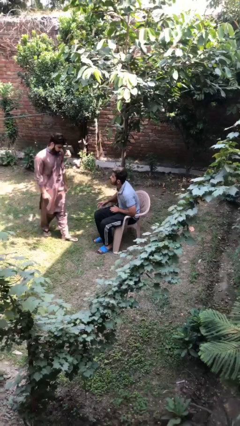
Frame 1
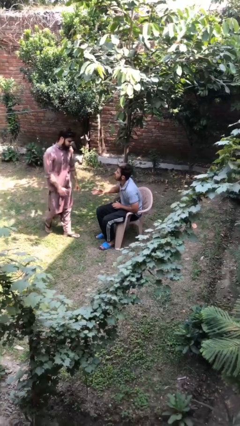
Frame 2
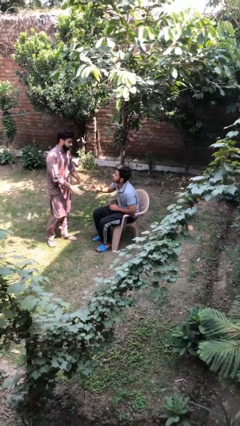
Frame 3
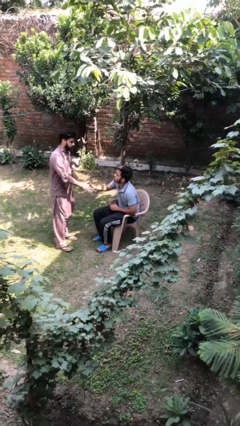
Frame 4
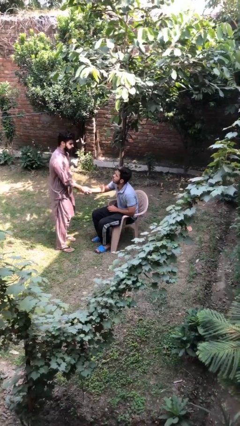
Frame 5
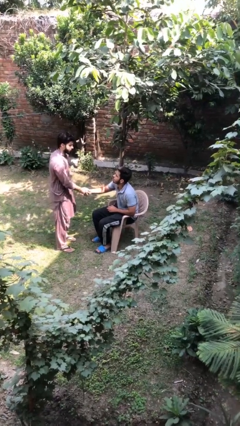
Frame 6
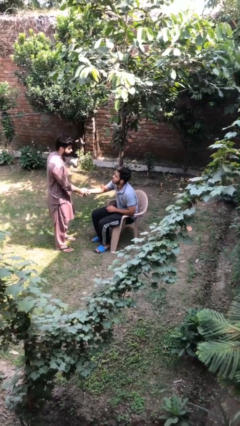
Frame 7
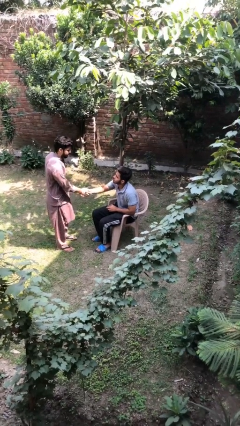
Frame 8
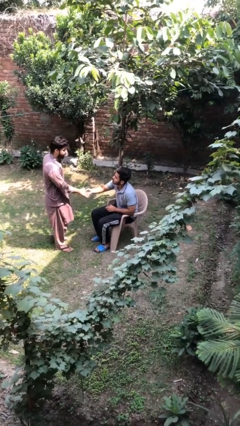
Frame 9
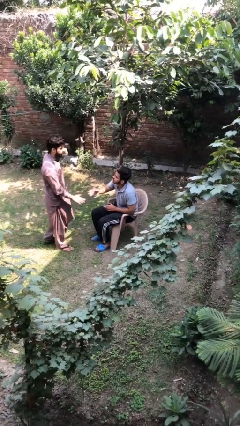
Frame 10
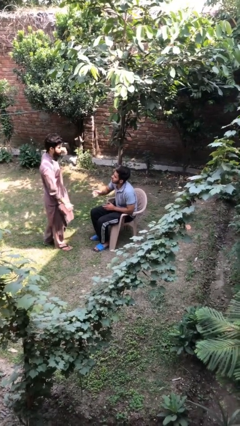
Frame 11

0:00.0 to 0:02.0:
person shakes hand

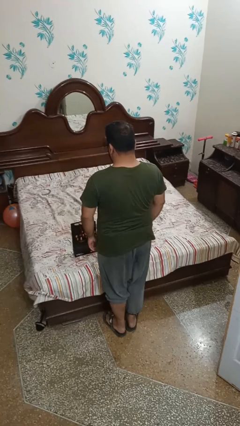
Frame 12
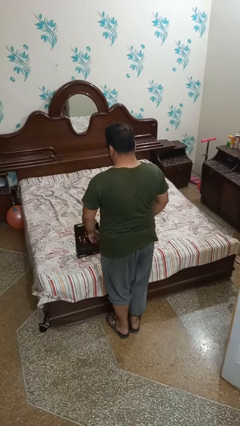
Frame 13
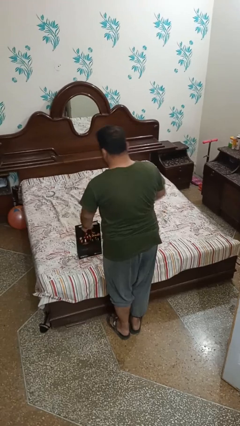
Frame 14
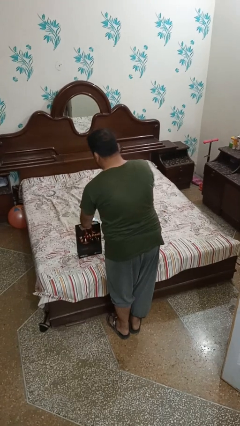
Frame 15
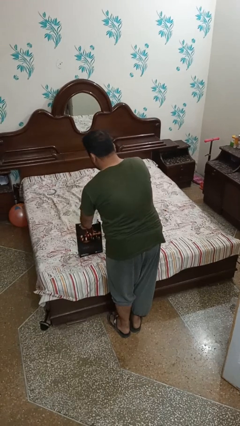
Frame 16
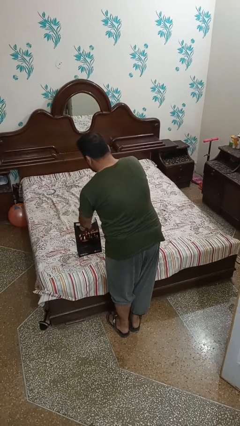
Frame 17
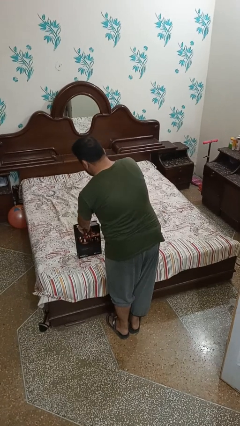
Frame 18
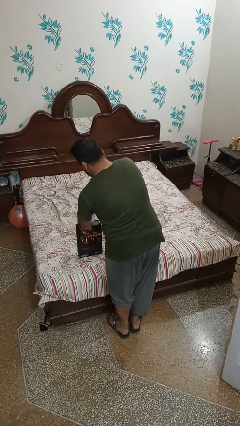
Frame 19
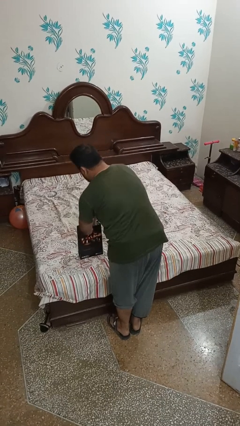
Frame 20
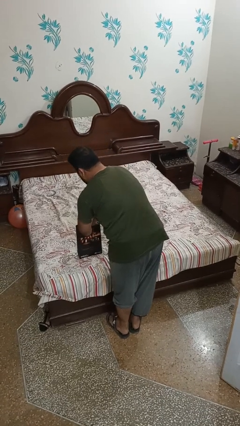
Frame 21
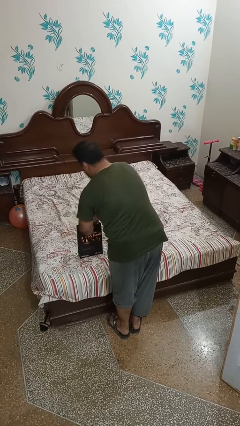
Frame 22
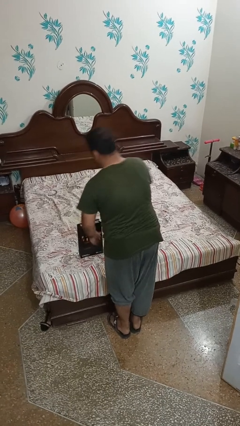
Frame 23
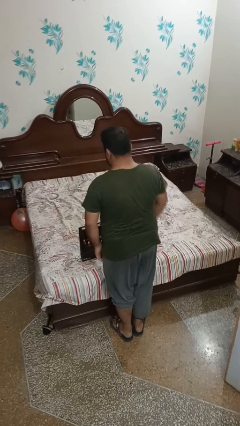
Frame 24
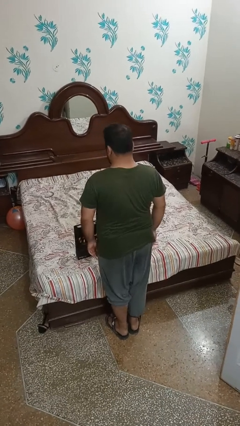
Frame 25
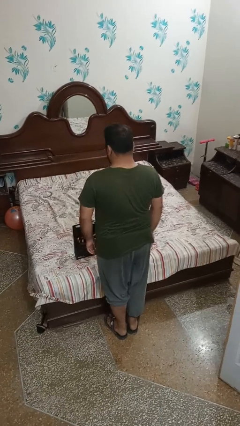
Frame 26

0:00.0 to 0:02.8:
person puts object into bag

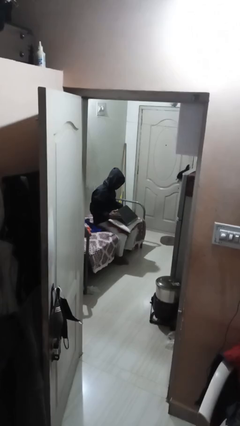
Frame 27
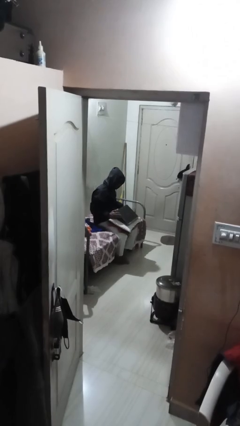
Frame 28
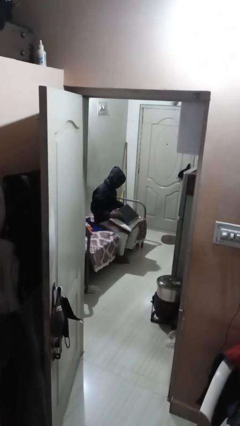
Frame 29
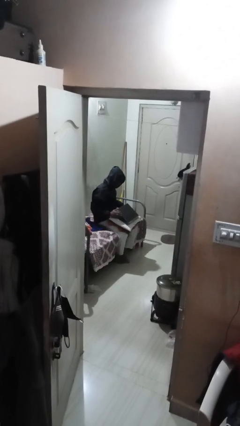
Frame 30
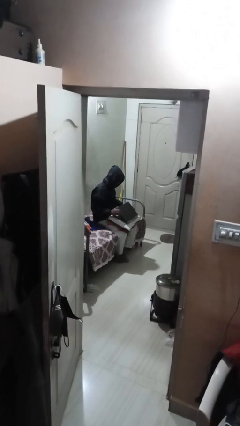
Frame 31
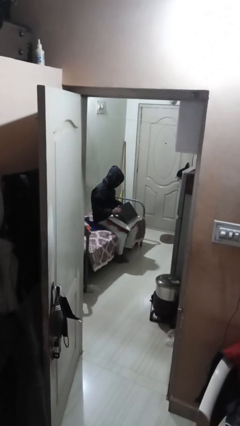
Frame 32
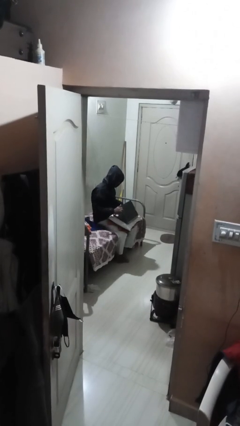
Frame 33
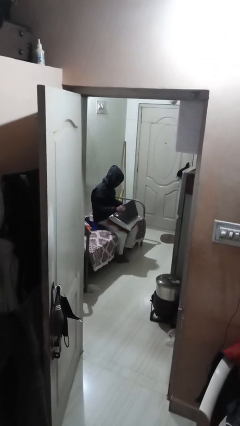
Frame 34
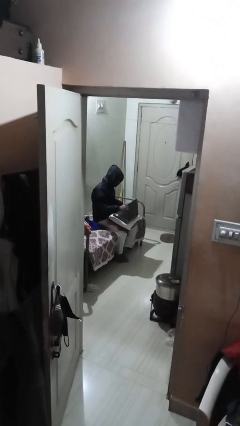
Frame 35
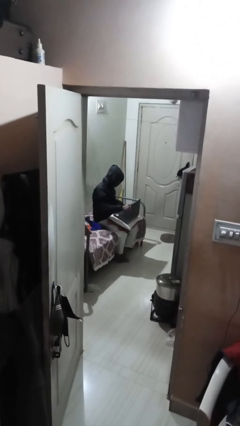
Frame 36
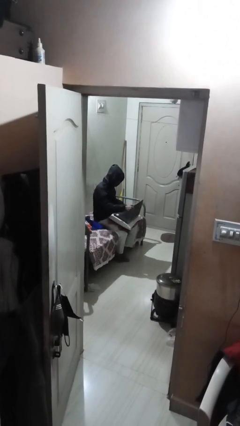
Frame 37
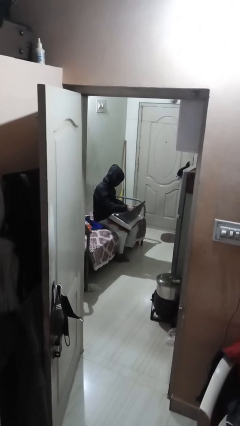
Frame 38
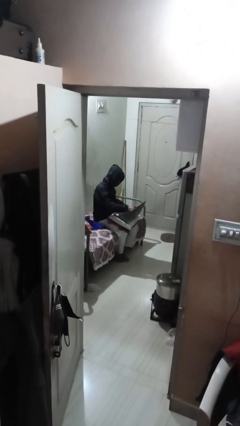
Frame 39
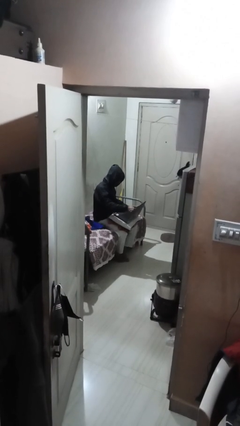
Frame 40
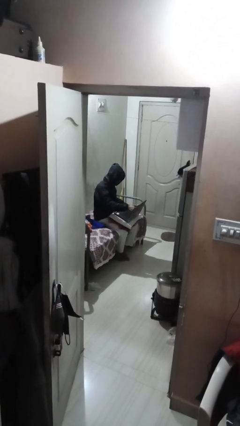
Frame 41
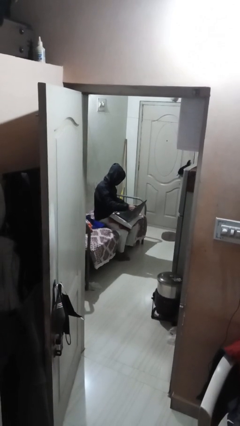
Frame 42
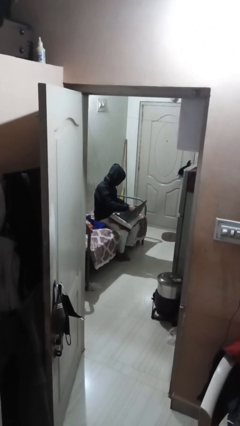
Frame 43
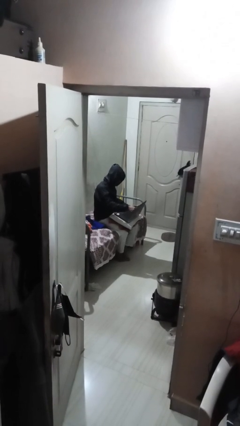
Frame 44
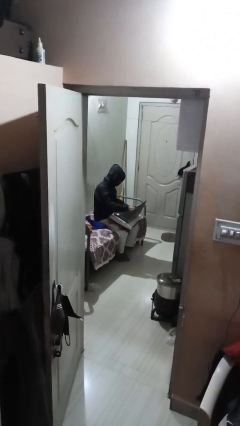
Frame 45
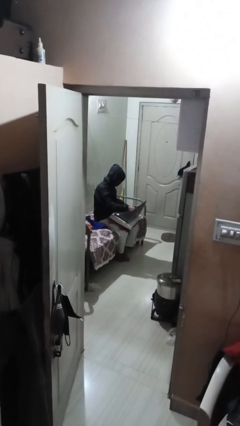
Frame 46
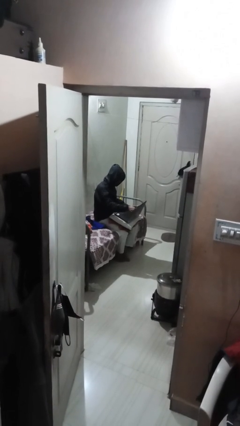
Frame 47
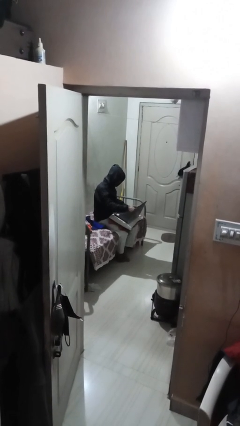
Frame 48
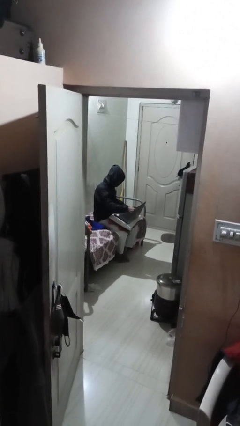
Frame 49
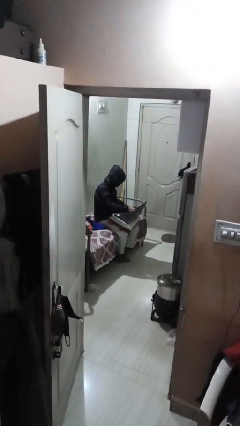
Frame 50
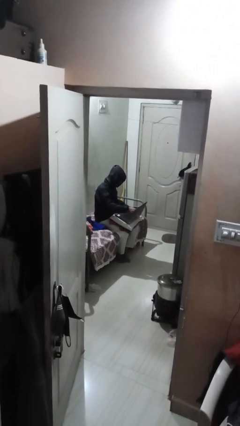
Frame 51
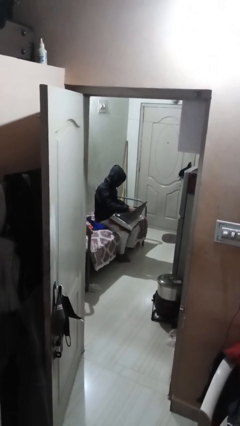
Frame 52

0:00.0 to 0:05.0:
person interacts with laptop

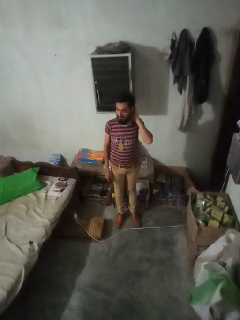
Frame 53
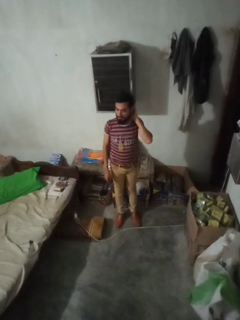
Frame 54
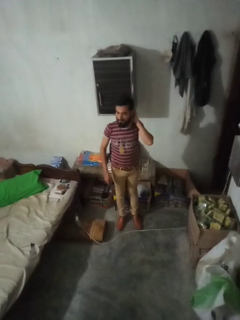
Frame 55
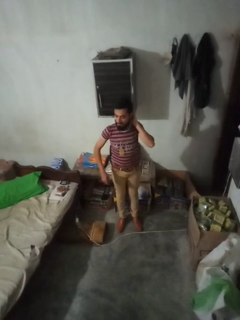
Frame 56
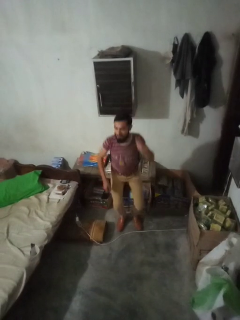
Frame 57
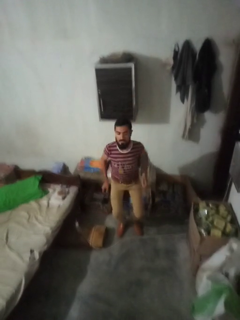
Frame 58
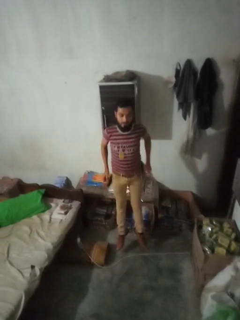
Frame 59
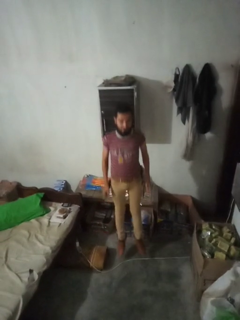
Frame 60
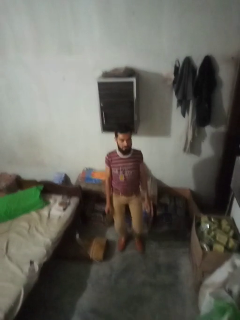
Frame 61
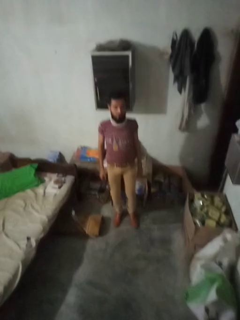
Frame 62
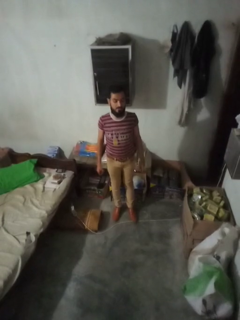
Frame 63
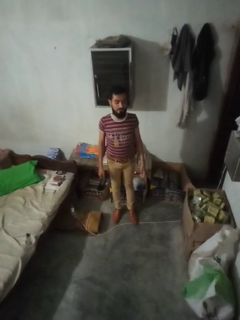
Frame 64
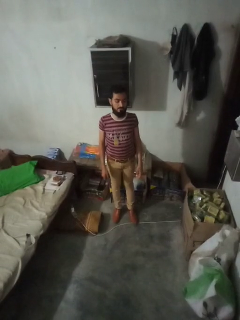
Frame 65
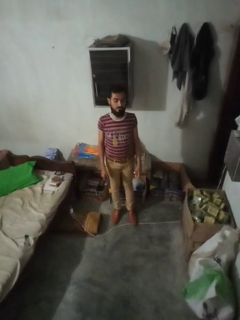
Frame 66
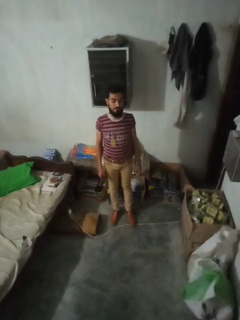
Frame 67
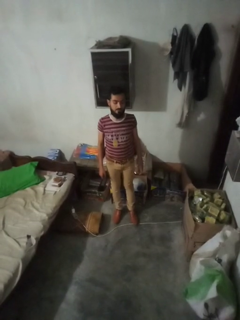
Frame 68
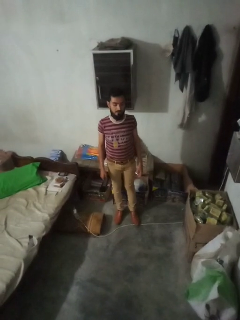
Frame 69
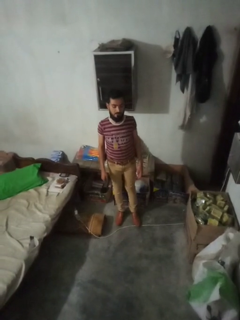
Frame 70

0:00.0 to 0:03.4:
person jumps

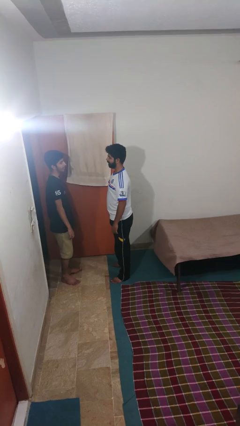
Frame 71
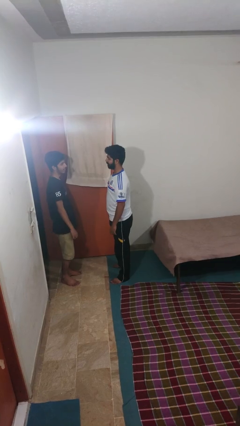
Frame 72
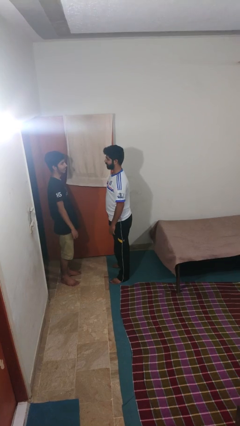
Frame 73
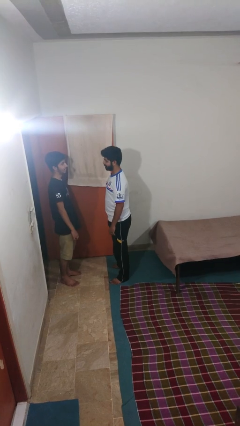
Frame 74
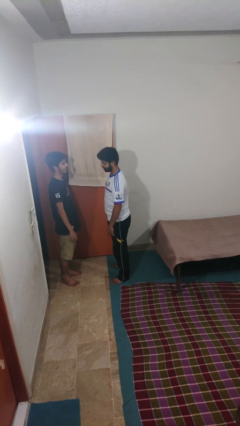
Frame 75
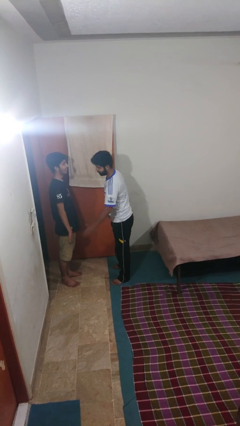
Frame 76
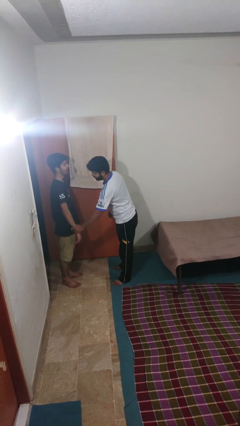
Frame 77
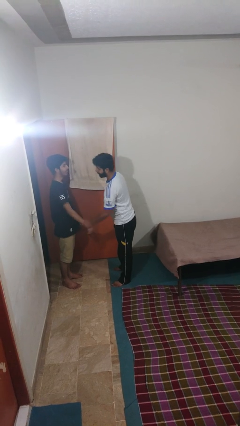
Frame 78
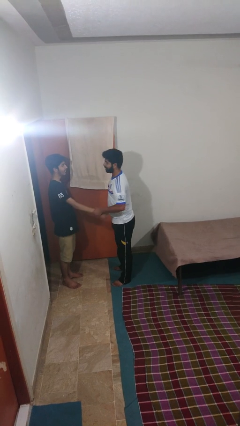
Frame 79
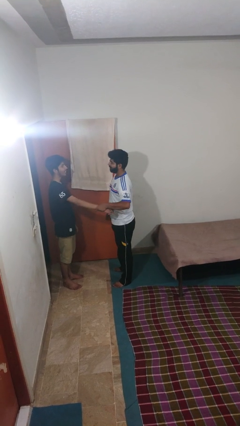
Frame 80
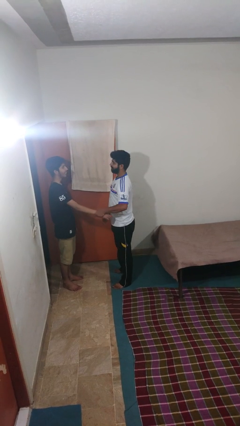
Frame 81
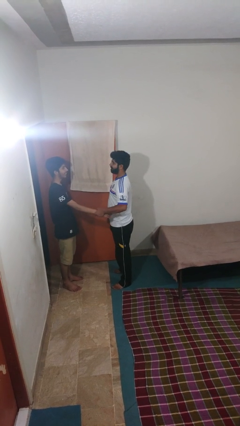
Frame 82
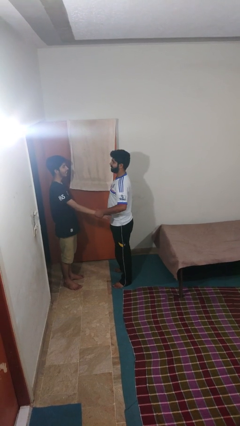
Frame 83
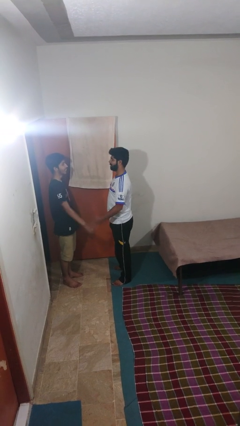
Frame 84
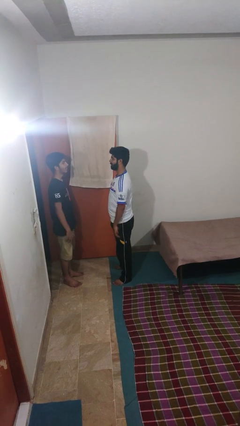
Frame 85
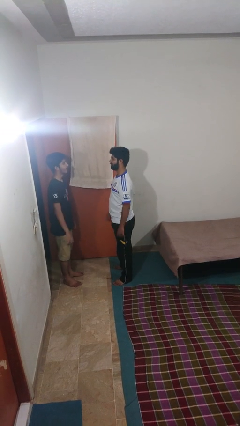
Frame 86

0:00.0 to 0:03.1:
person grabs person by forearm

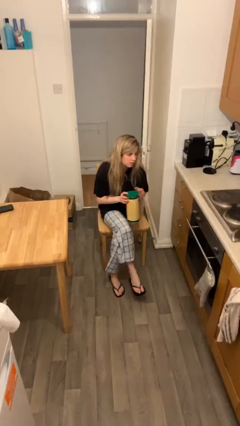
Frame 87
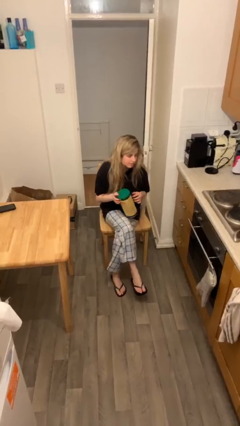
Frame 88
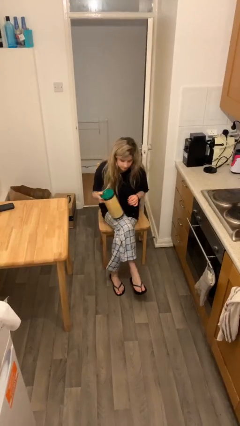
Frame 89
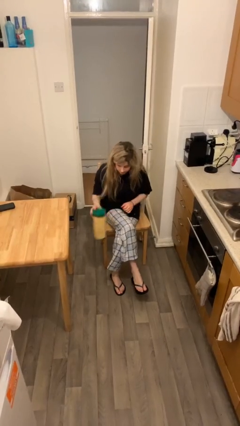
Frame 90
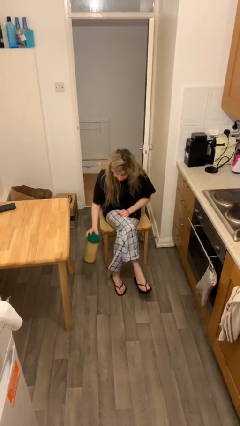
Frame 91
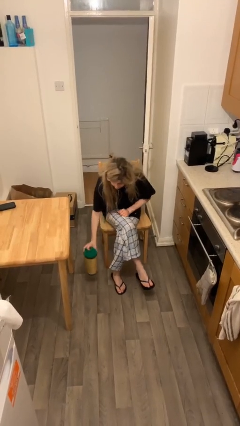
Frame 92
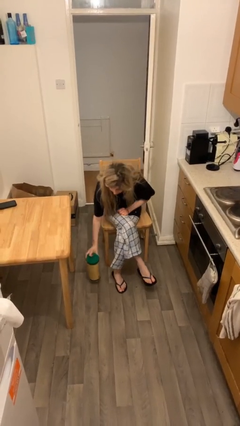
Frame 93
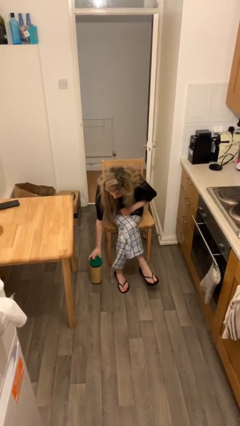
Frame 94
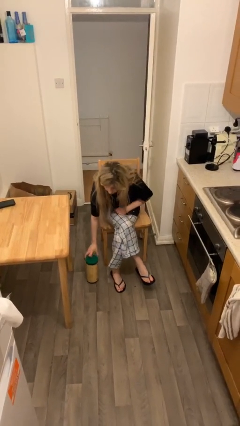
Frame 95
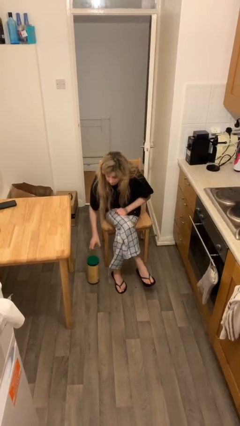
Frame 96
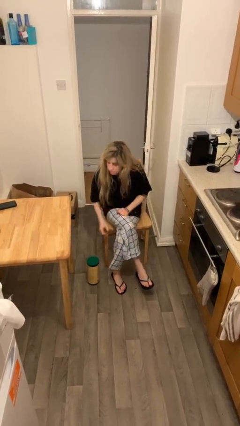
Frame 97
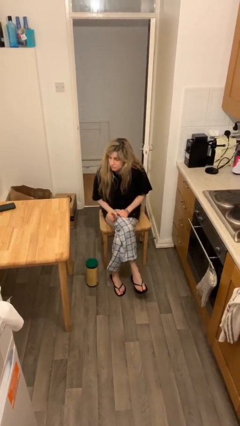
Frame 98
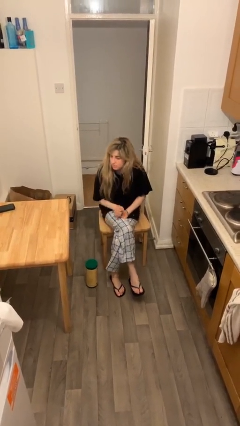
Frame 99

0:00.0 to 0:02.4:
person puts down object on floor
